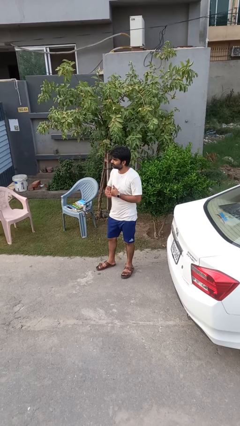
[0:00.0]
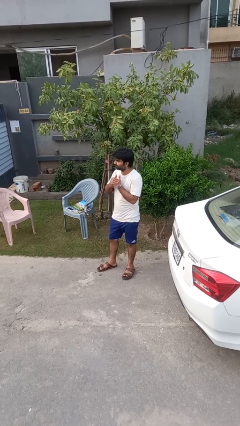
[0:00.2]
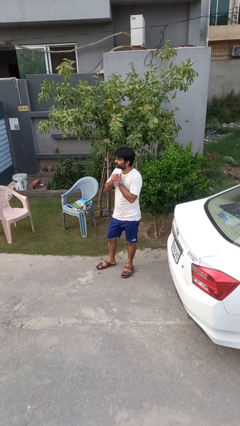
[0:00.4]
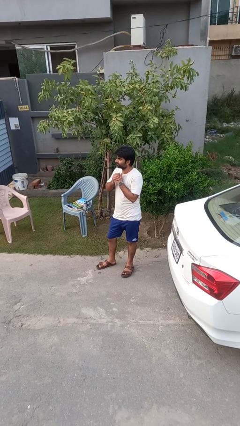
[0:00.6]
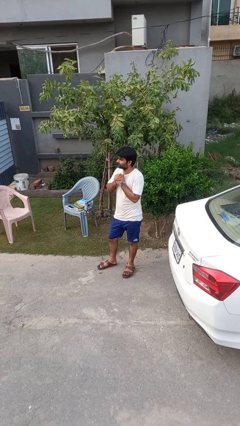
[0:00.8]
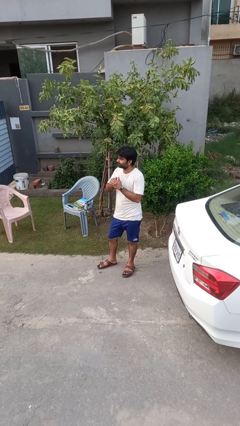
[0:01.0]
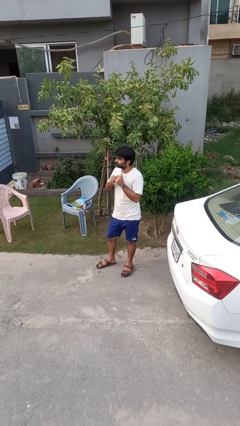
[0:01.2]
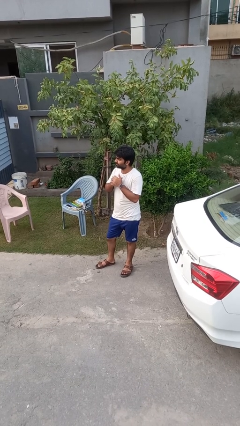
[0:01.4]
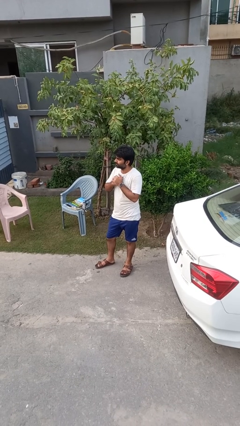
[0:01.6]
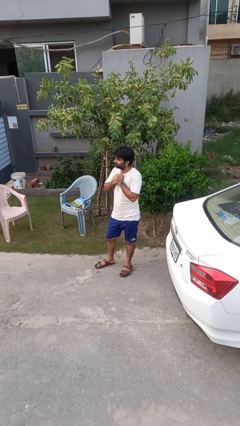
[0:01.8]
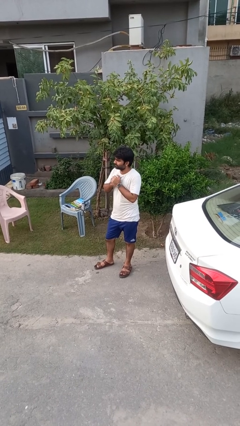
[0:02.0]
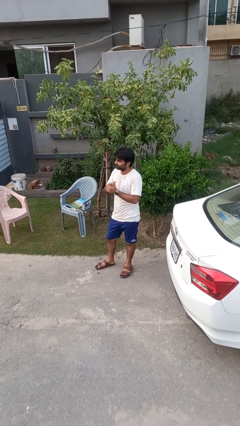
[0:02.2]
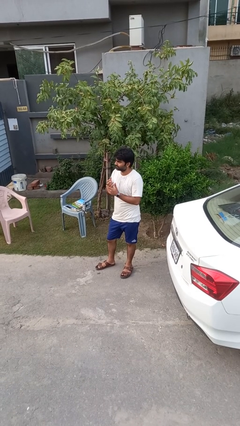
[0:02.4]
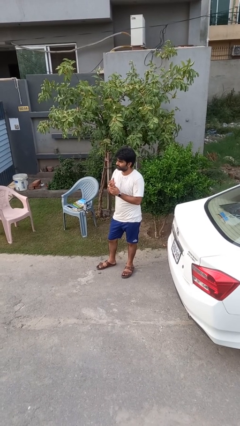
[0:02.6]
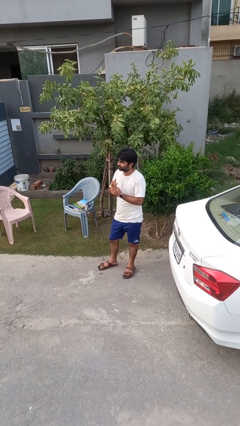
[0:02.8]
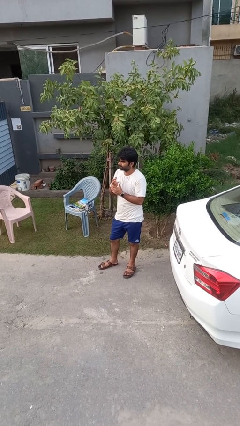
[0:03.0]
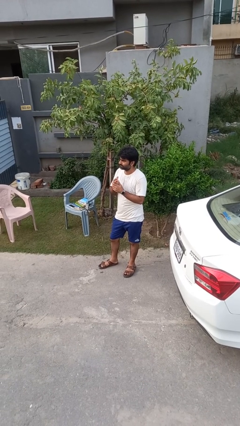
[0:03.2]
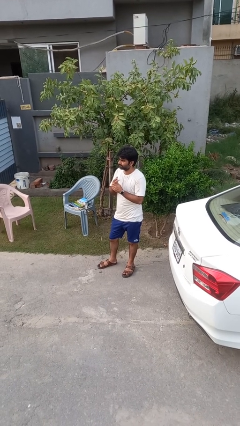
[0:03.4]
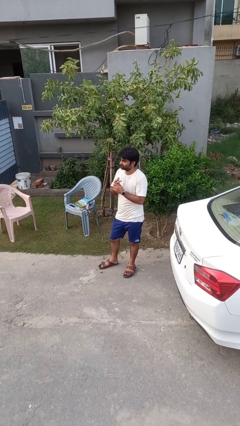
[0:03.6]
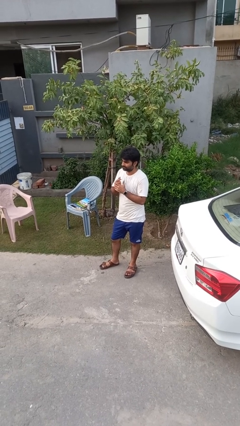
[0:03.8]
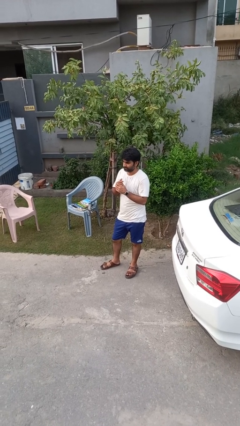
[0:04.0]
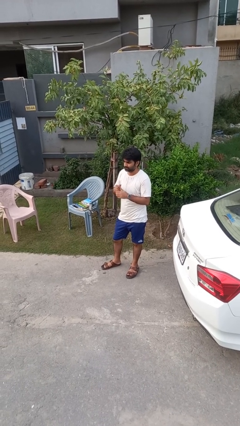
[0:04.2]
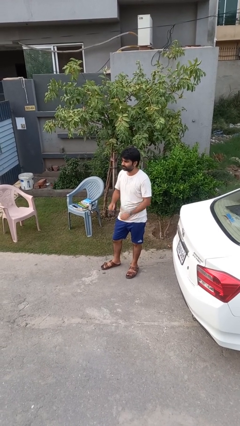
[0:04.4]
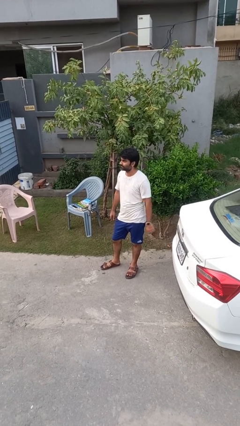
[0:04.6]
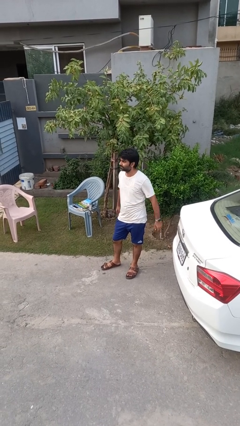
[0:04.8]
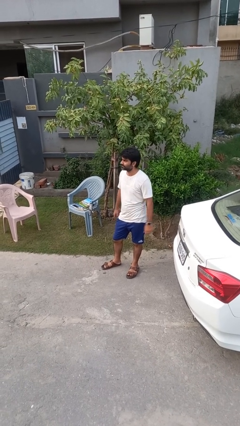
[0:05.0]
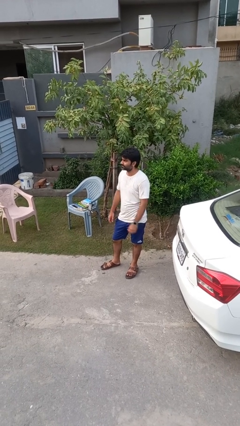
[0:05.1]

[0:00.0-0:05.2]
person cracks knuckles

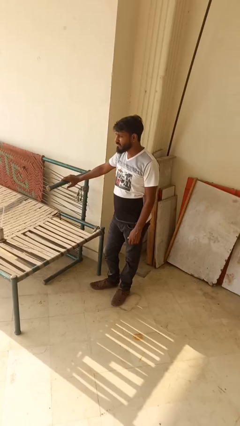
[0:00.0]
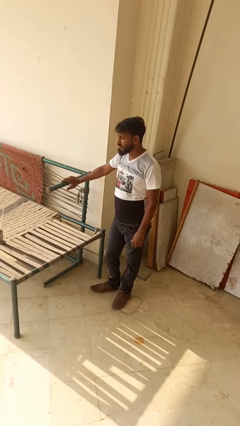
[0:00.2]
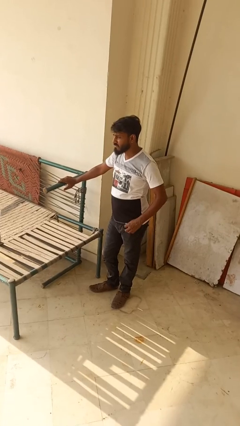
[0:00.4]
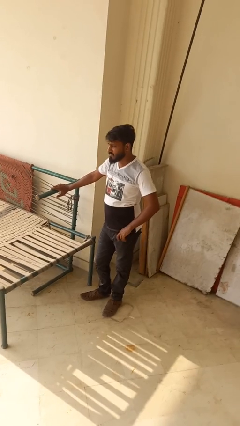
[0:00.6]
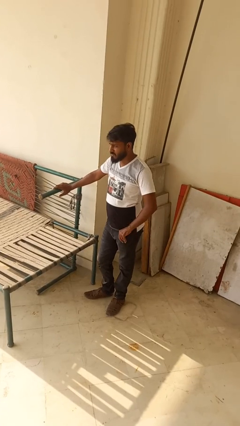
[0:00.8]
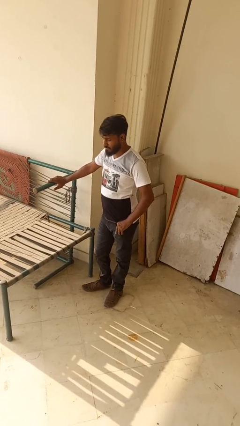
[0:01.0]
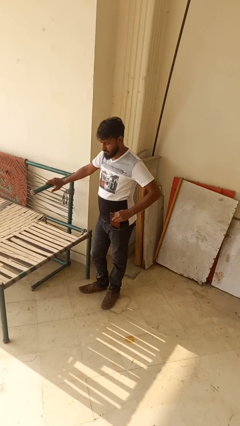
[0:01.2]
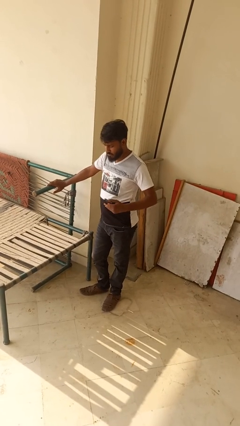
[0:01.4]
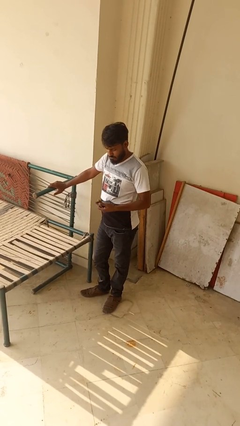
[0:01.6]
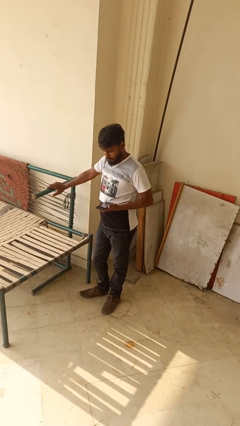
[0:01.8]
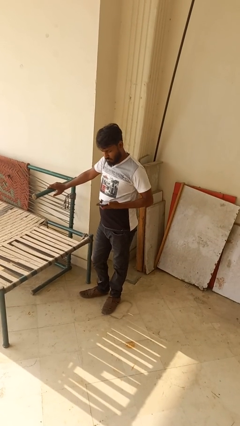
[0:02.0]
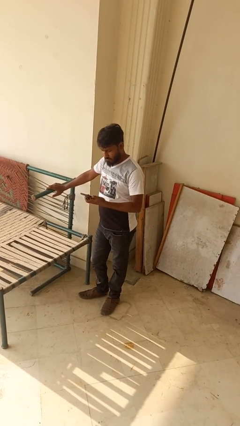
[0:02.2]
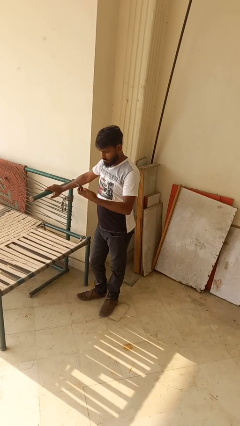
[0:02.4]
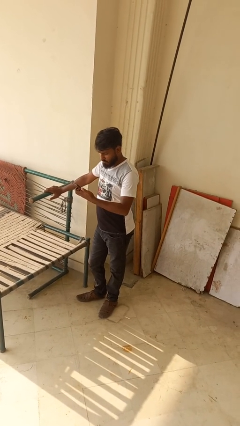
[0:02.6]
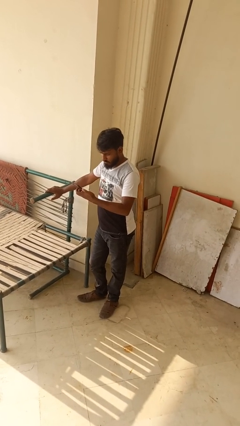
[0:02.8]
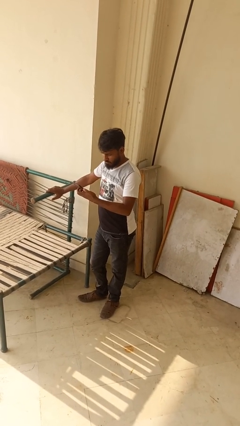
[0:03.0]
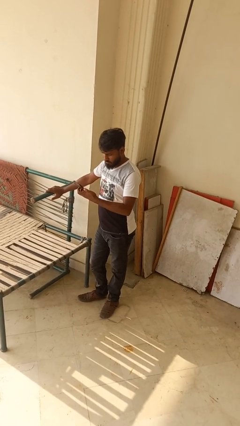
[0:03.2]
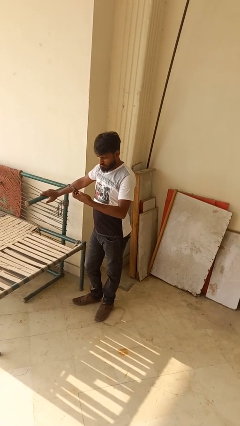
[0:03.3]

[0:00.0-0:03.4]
person takes phone from pocket

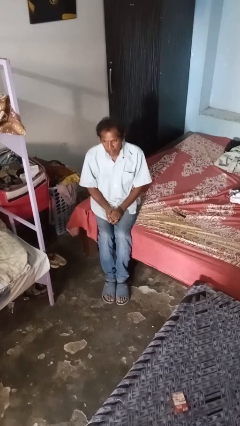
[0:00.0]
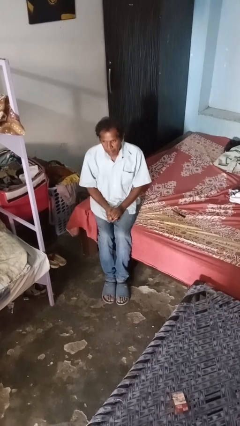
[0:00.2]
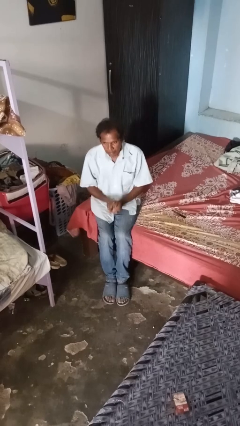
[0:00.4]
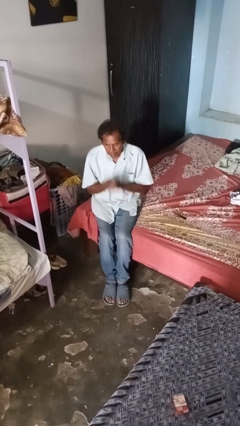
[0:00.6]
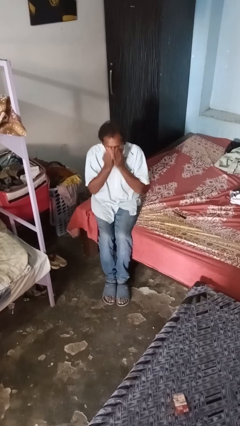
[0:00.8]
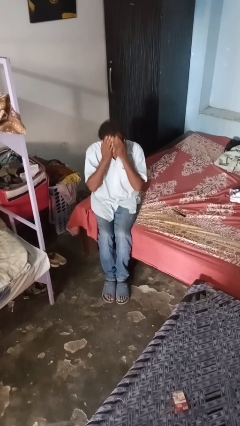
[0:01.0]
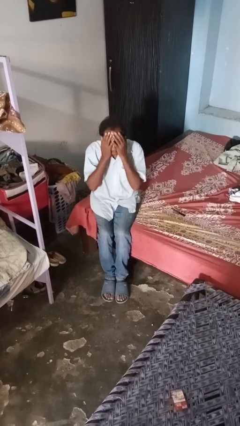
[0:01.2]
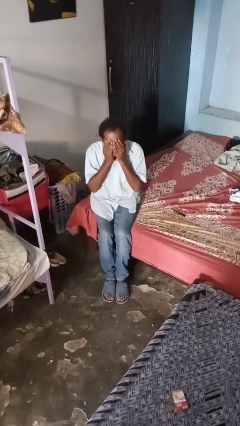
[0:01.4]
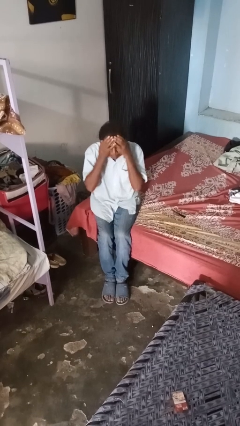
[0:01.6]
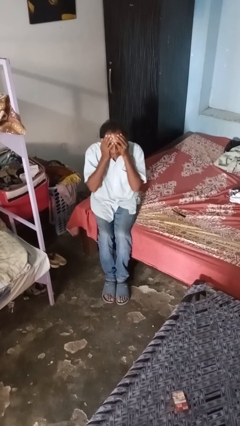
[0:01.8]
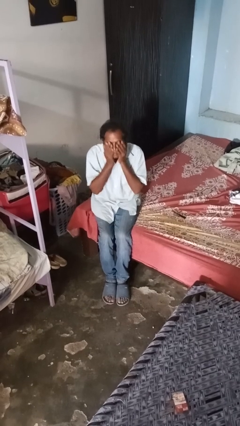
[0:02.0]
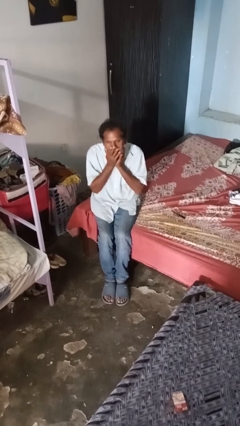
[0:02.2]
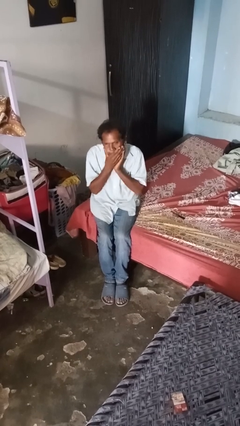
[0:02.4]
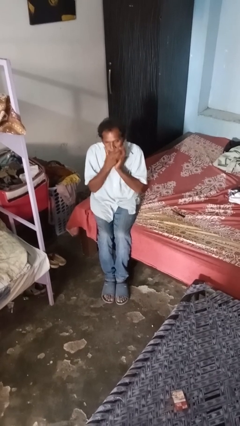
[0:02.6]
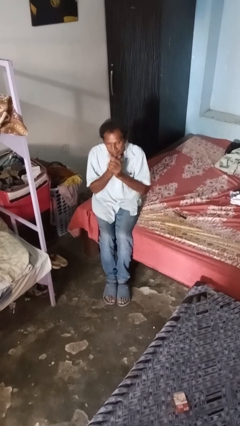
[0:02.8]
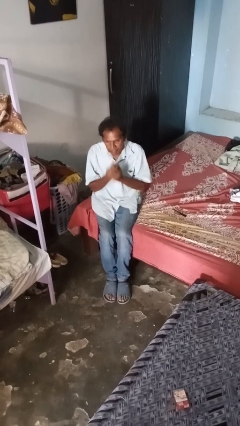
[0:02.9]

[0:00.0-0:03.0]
person applies foundation makeup

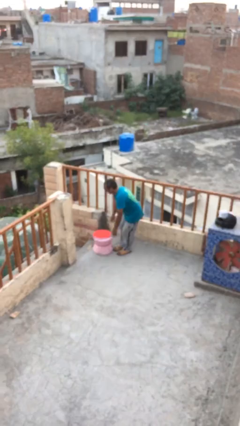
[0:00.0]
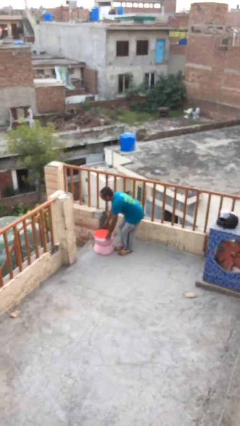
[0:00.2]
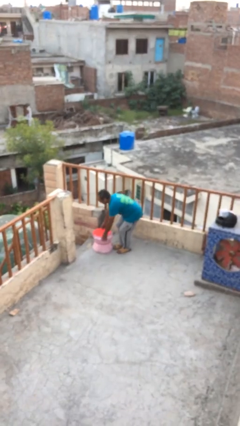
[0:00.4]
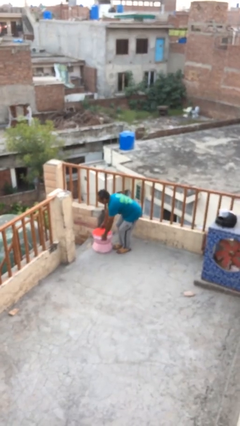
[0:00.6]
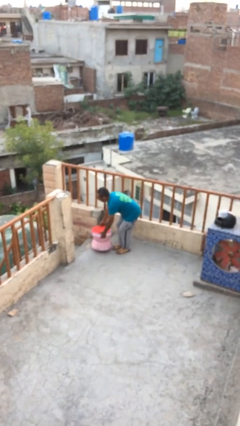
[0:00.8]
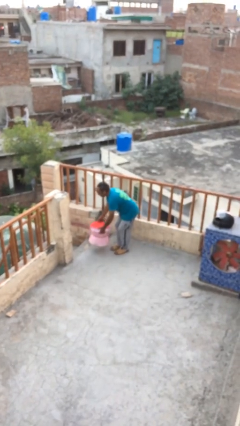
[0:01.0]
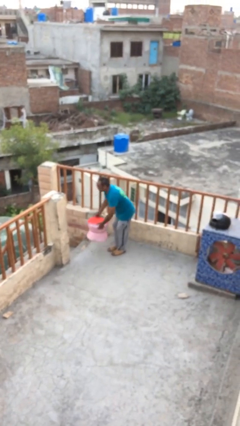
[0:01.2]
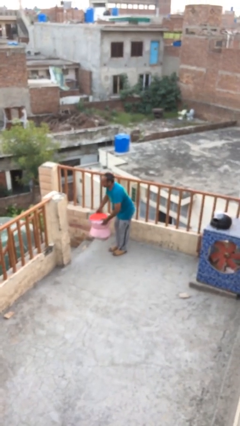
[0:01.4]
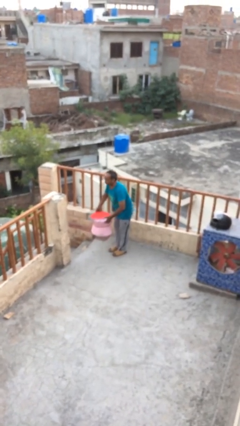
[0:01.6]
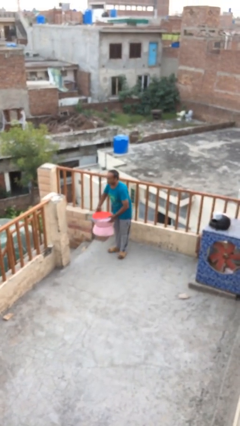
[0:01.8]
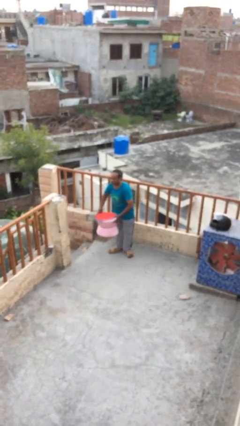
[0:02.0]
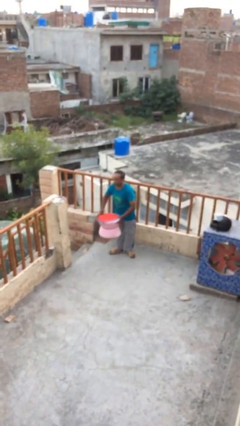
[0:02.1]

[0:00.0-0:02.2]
person picks up object from floor

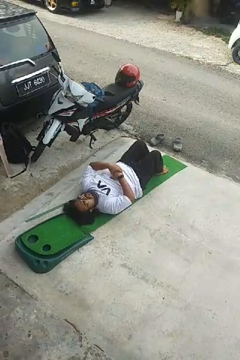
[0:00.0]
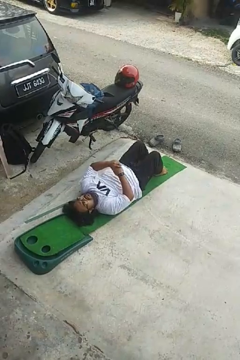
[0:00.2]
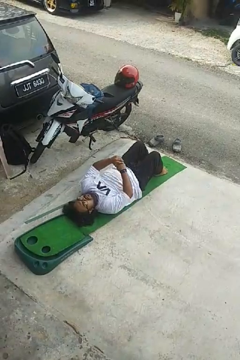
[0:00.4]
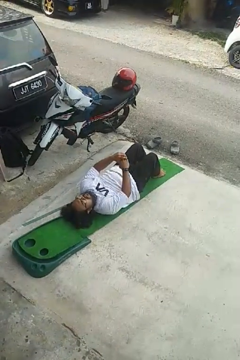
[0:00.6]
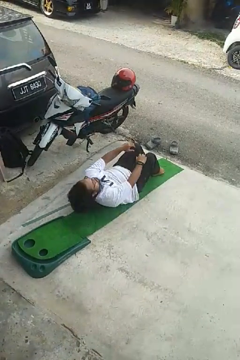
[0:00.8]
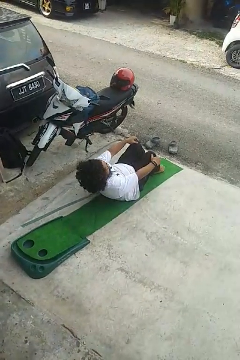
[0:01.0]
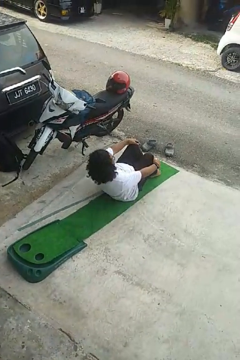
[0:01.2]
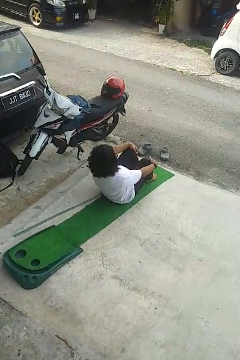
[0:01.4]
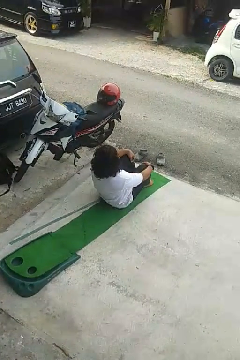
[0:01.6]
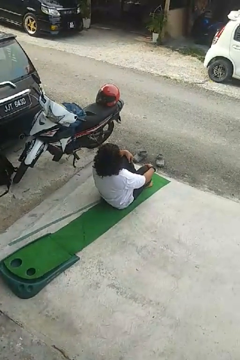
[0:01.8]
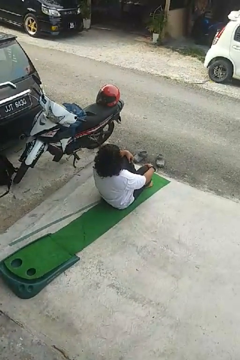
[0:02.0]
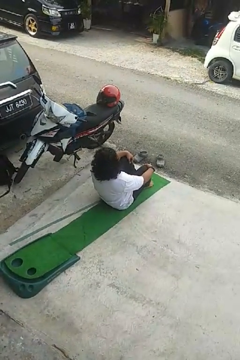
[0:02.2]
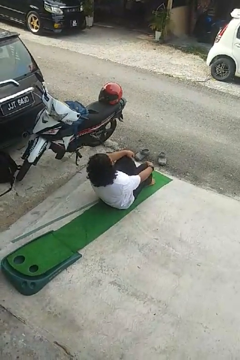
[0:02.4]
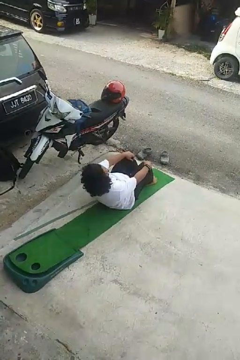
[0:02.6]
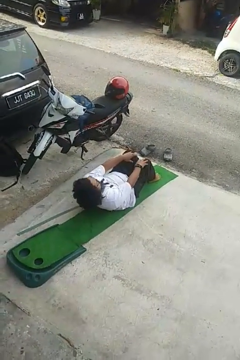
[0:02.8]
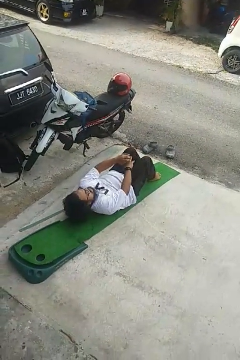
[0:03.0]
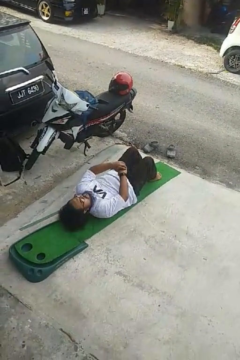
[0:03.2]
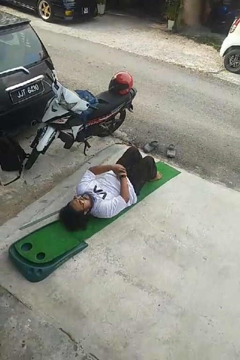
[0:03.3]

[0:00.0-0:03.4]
person exercises with situp

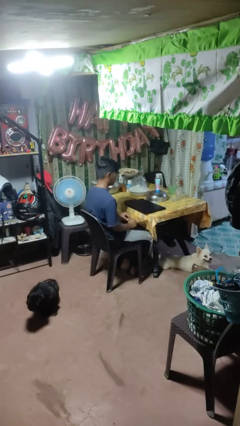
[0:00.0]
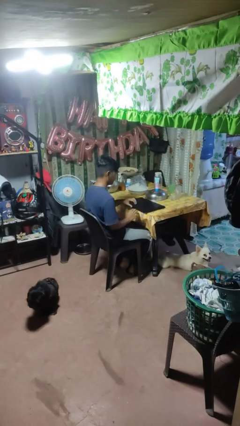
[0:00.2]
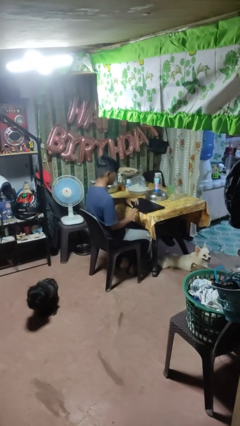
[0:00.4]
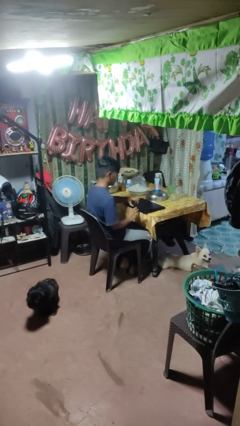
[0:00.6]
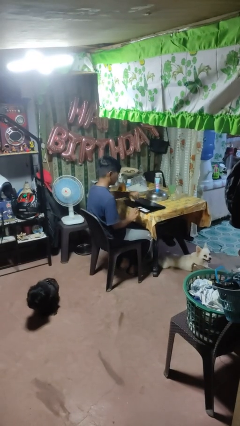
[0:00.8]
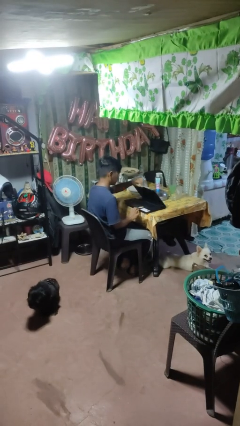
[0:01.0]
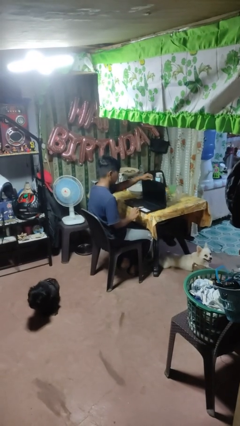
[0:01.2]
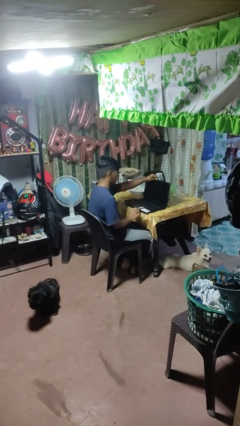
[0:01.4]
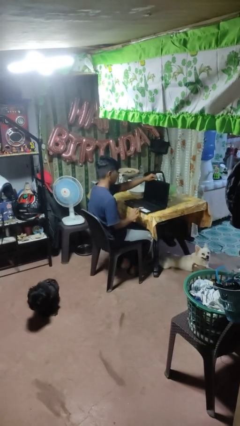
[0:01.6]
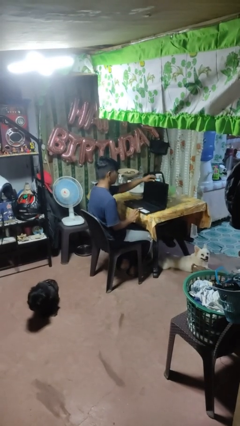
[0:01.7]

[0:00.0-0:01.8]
person opens laptop
